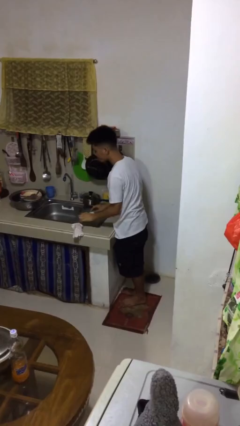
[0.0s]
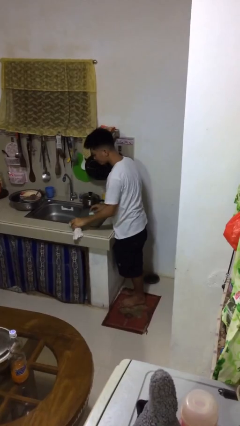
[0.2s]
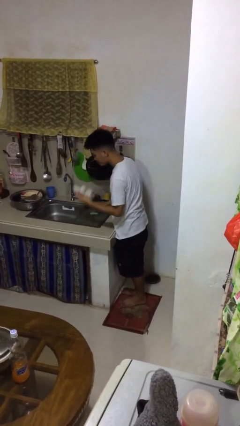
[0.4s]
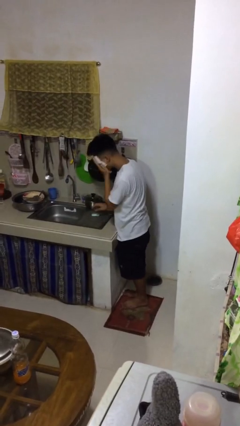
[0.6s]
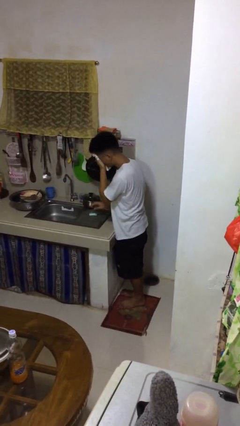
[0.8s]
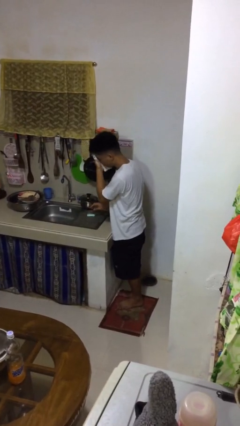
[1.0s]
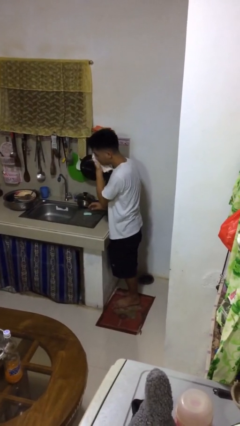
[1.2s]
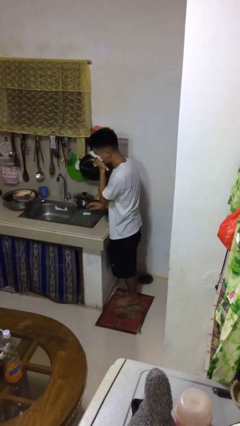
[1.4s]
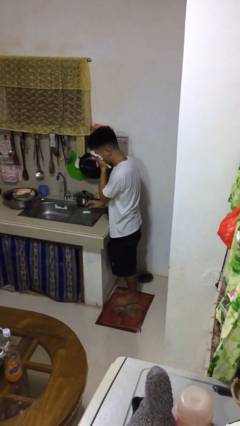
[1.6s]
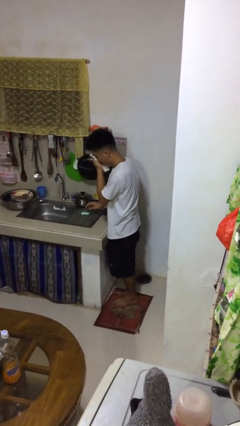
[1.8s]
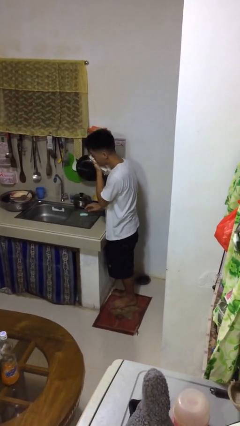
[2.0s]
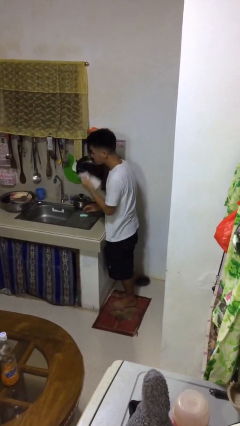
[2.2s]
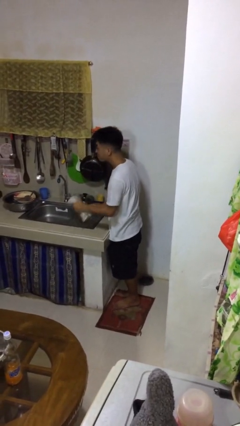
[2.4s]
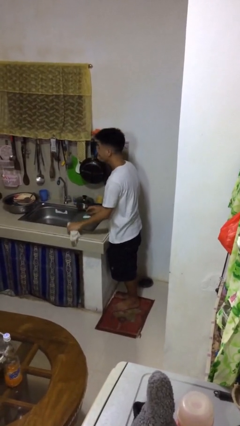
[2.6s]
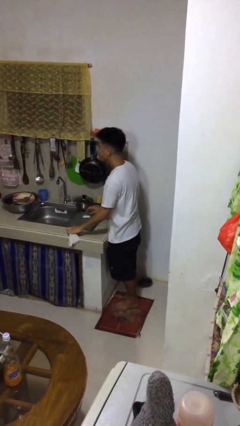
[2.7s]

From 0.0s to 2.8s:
person dries face with towel

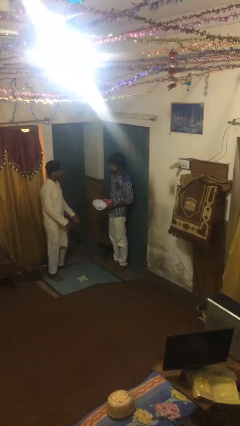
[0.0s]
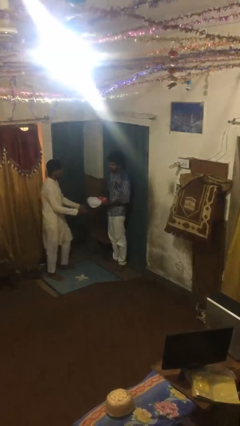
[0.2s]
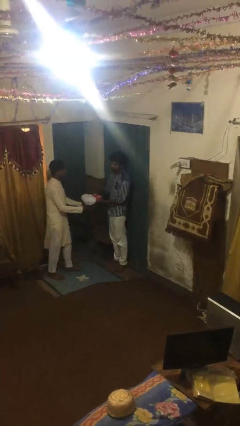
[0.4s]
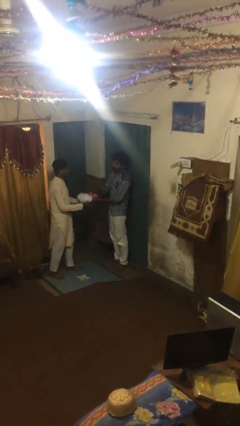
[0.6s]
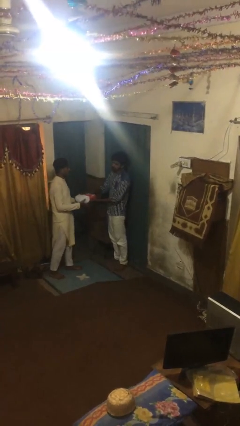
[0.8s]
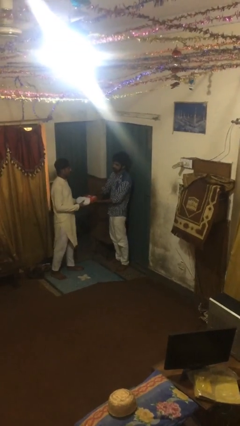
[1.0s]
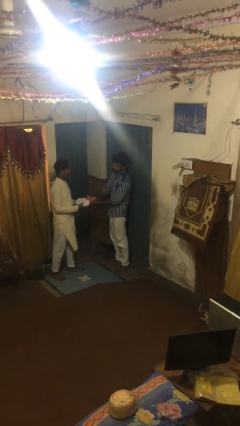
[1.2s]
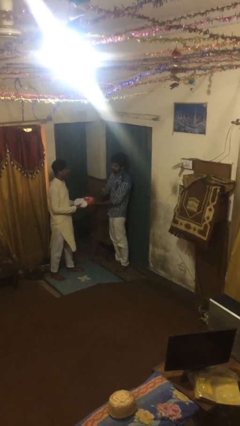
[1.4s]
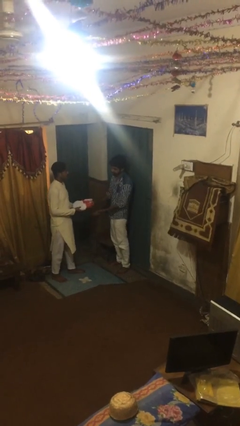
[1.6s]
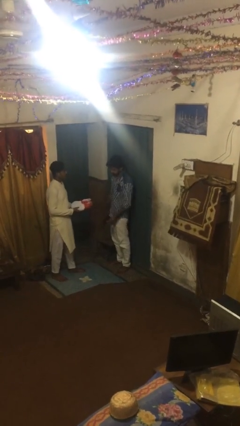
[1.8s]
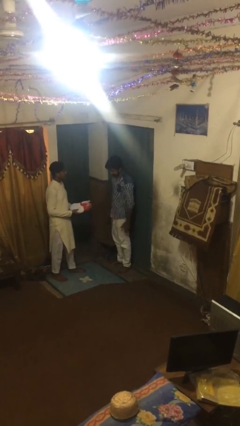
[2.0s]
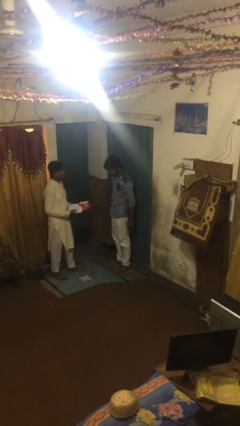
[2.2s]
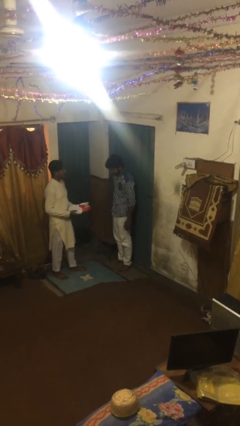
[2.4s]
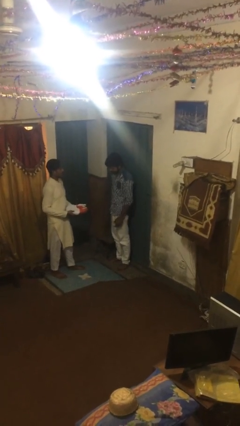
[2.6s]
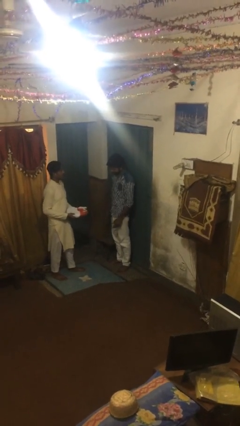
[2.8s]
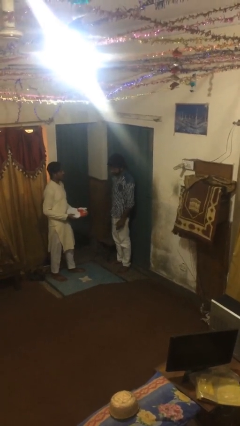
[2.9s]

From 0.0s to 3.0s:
person transfers object to person

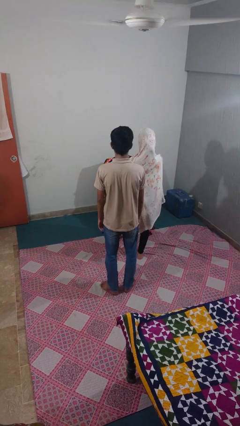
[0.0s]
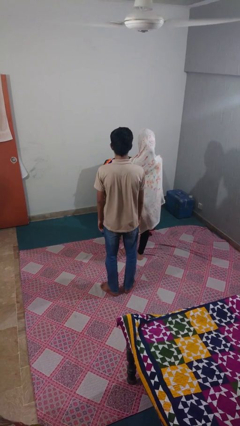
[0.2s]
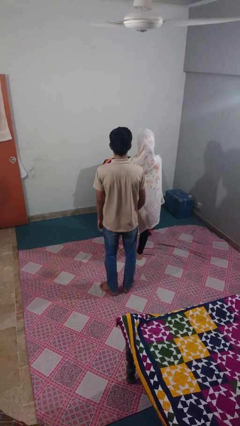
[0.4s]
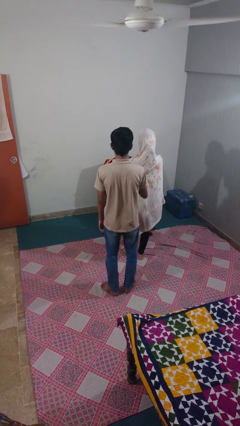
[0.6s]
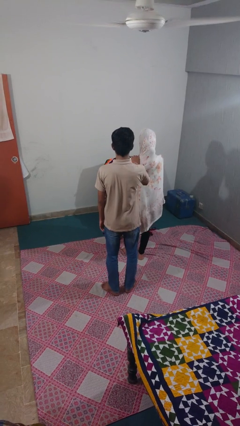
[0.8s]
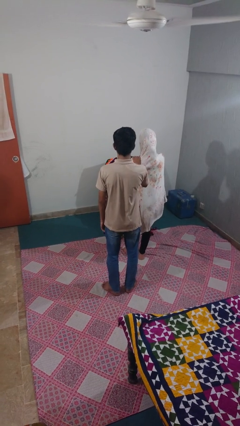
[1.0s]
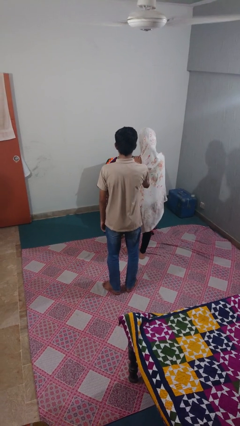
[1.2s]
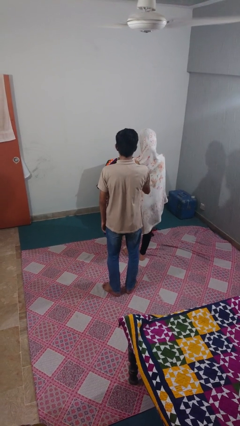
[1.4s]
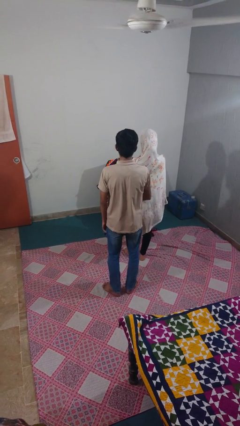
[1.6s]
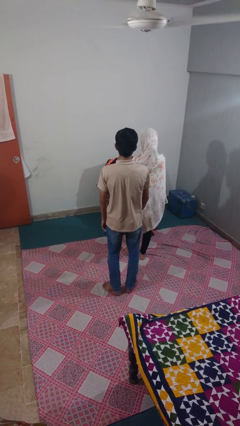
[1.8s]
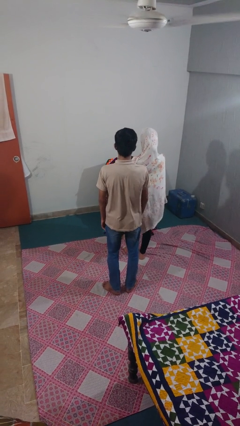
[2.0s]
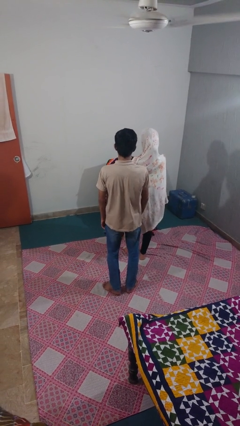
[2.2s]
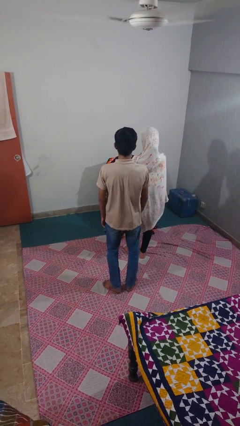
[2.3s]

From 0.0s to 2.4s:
person touches back of person

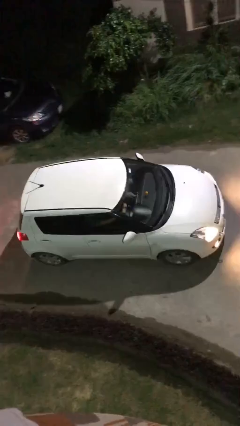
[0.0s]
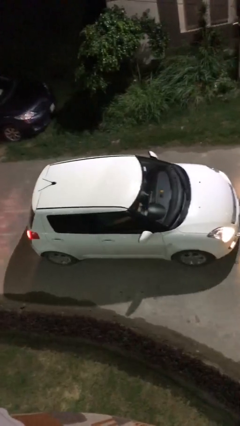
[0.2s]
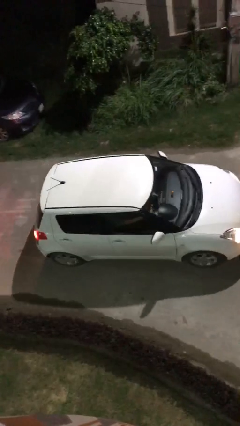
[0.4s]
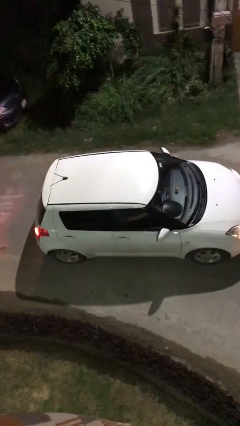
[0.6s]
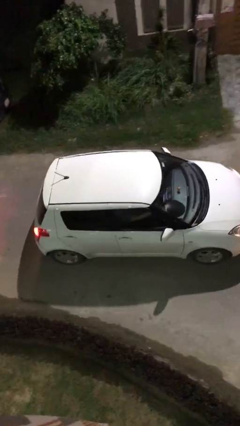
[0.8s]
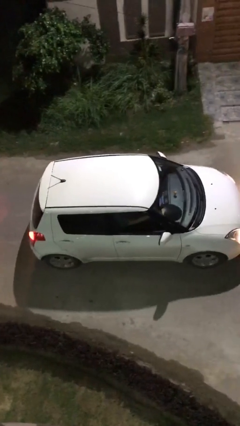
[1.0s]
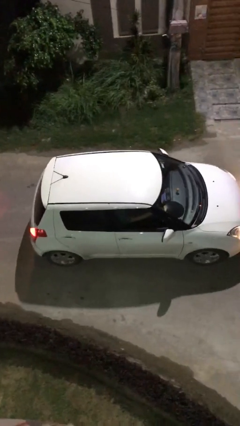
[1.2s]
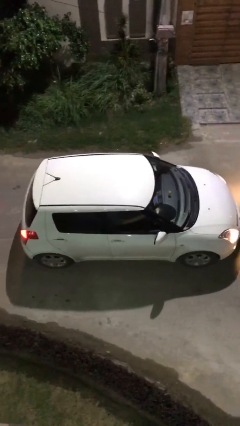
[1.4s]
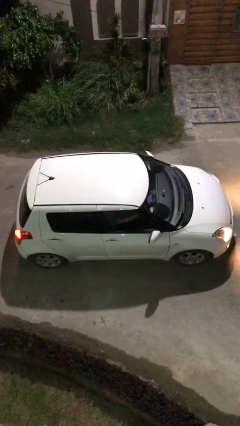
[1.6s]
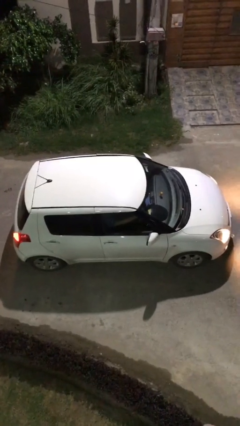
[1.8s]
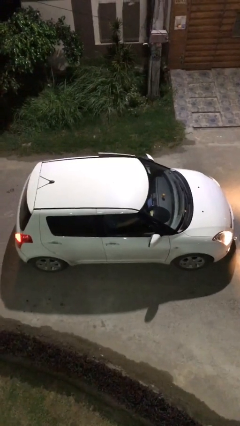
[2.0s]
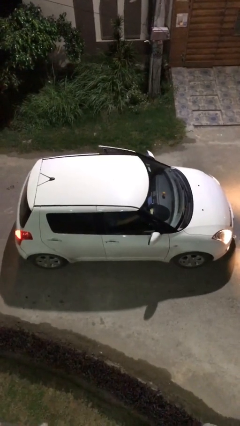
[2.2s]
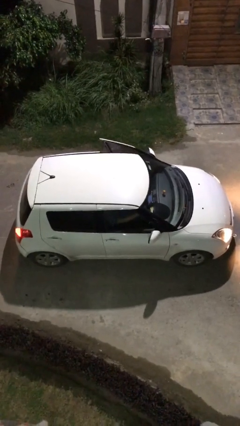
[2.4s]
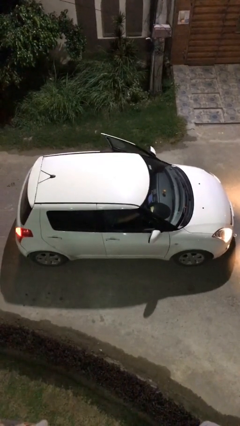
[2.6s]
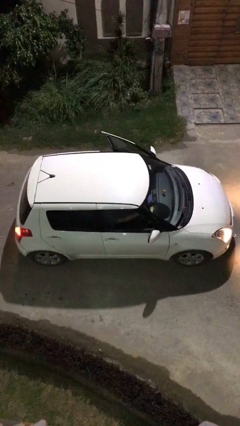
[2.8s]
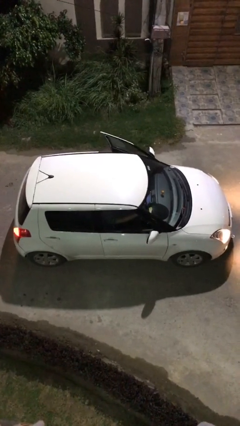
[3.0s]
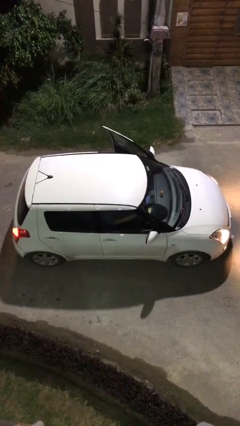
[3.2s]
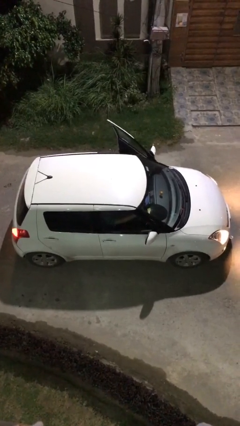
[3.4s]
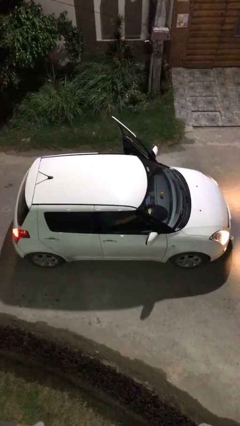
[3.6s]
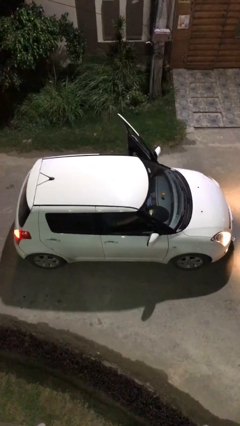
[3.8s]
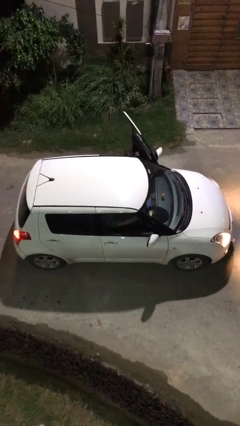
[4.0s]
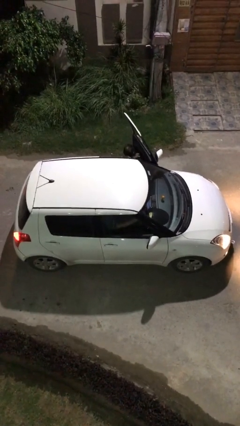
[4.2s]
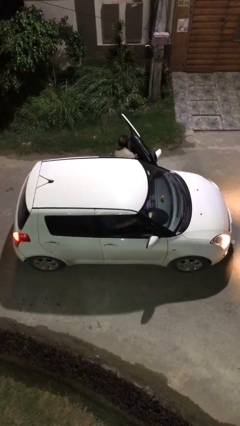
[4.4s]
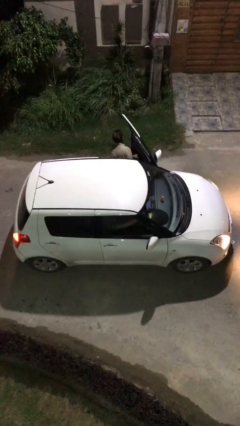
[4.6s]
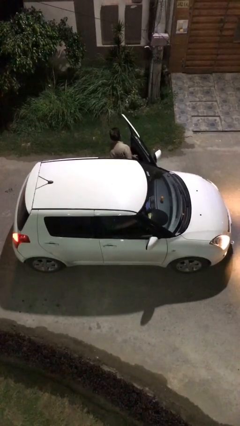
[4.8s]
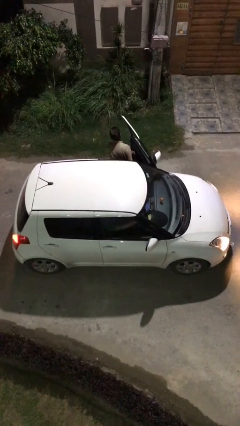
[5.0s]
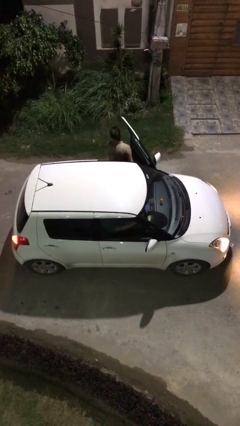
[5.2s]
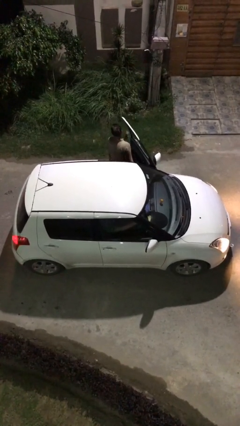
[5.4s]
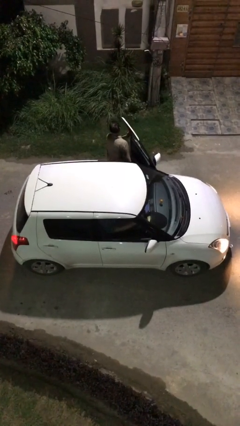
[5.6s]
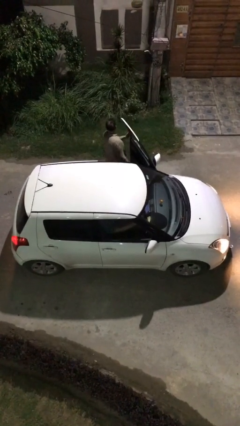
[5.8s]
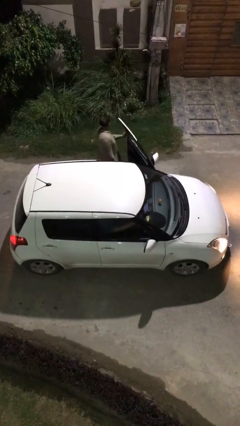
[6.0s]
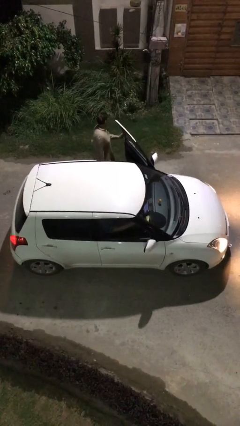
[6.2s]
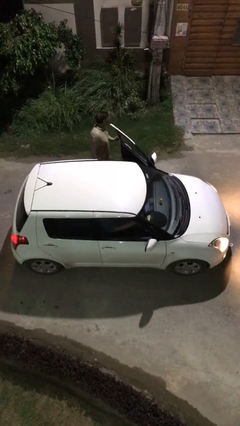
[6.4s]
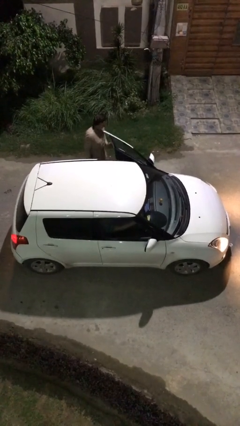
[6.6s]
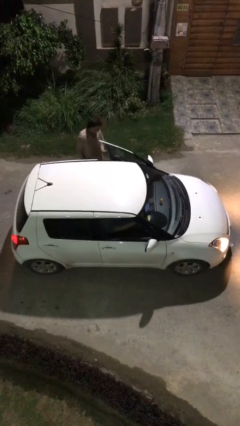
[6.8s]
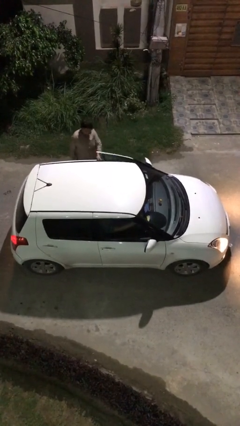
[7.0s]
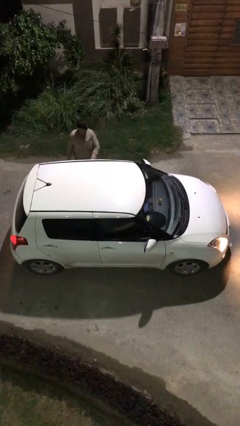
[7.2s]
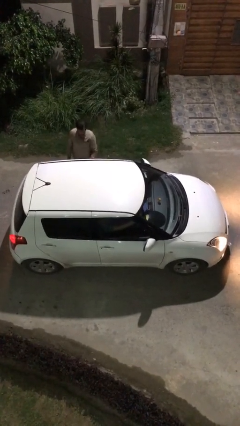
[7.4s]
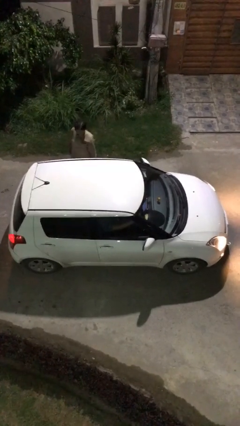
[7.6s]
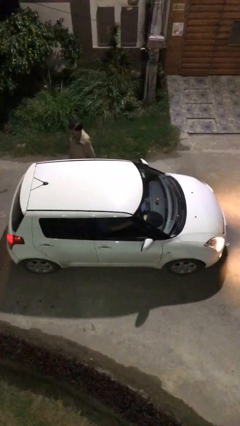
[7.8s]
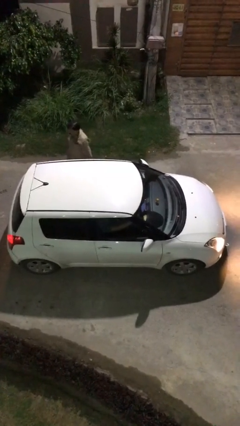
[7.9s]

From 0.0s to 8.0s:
car drops off person

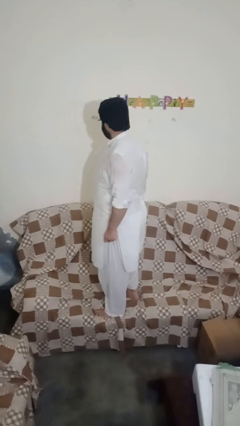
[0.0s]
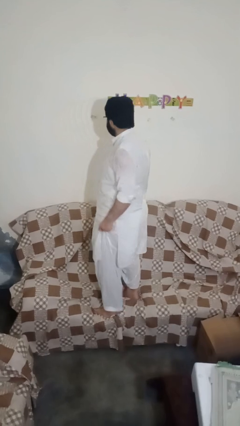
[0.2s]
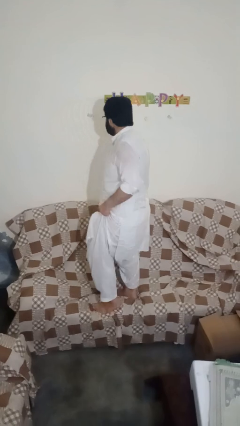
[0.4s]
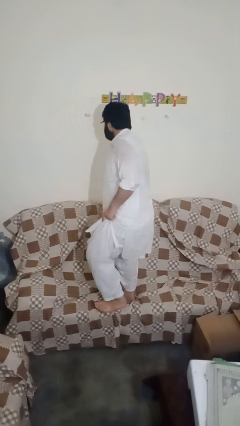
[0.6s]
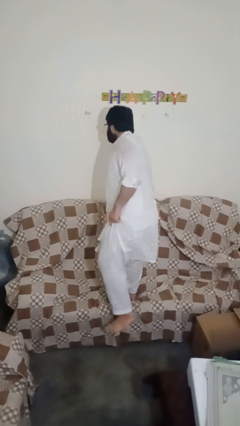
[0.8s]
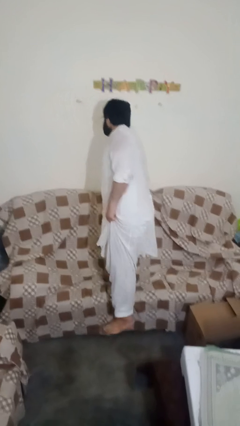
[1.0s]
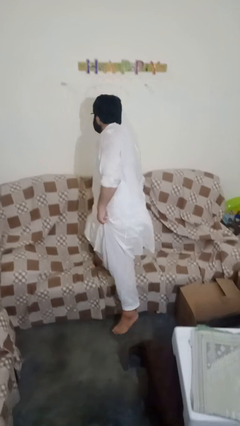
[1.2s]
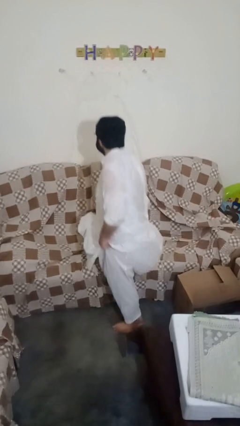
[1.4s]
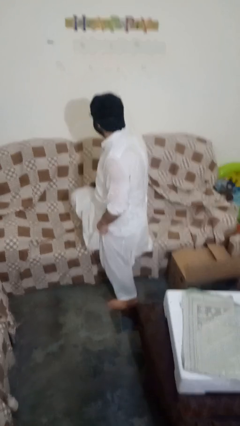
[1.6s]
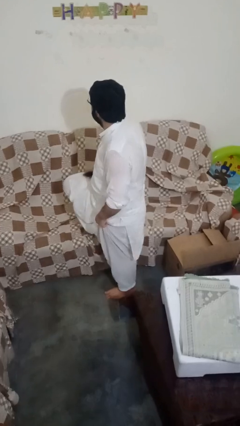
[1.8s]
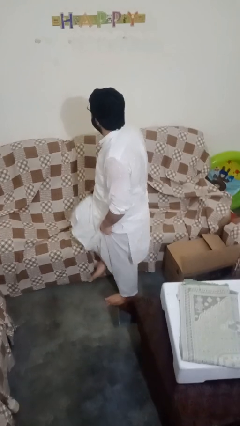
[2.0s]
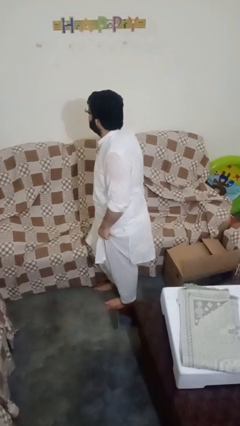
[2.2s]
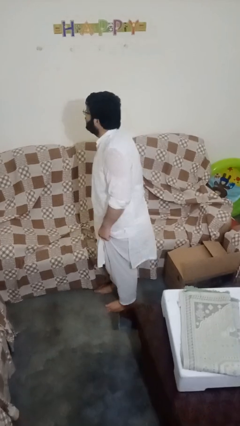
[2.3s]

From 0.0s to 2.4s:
person climbs off couch
